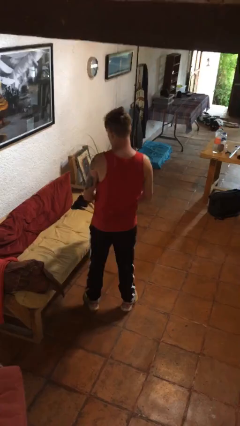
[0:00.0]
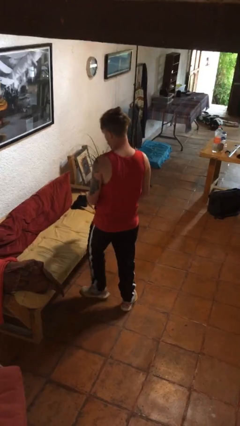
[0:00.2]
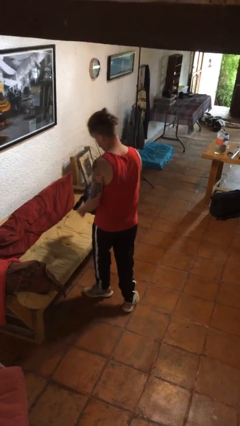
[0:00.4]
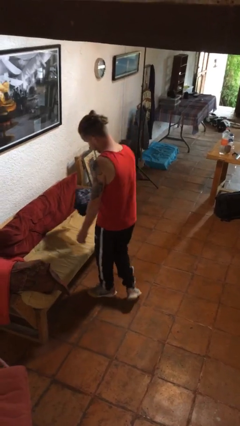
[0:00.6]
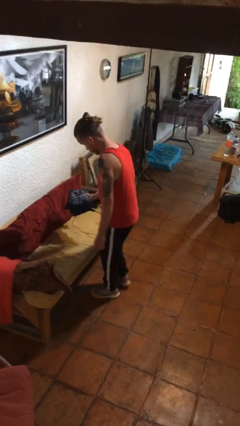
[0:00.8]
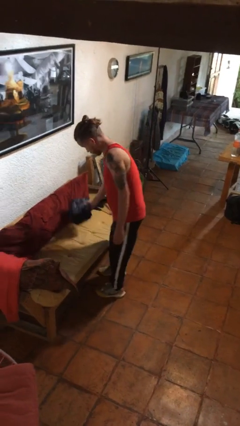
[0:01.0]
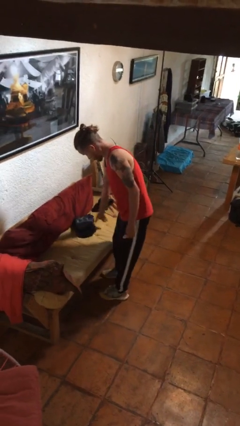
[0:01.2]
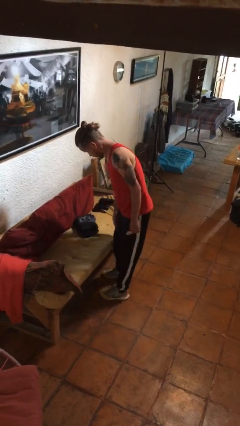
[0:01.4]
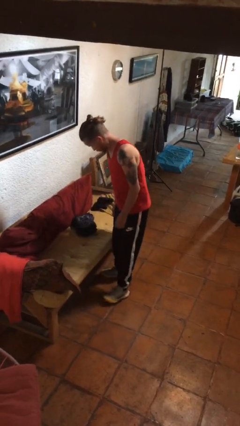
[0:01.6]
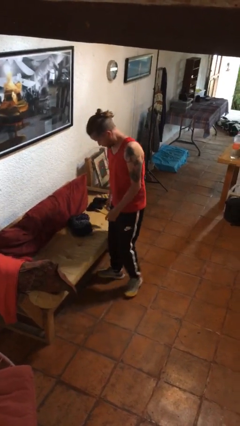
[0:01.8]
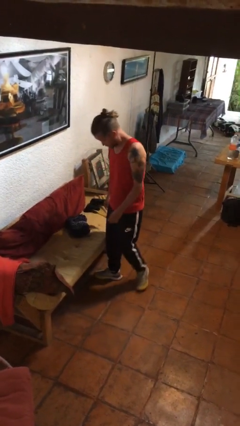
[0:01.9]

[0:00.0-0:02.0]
person puts down object on couch

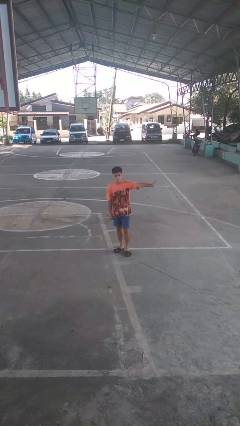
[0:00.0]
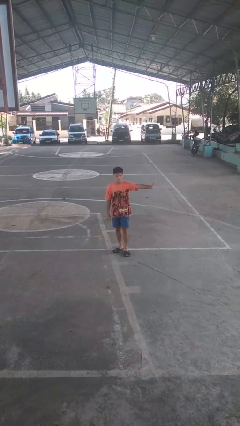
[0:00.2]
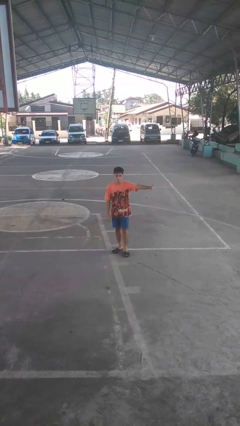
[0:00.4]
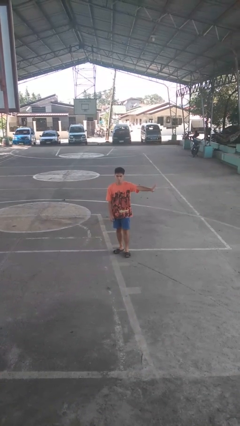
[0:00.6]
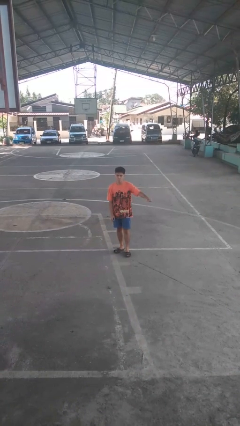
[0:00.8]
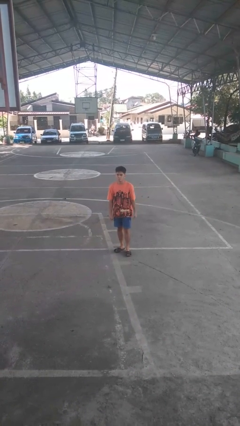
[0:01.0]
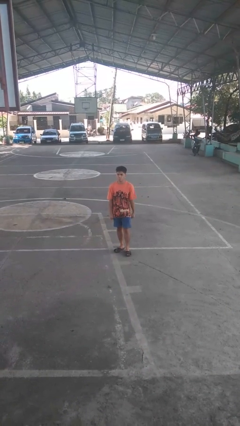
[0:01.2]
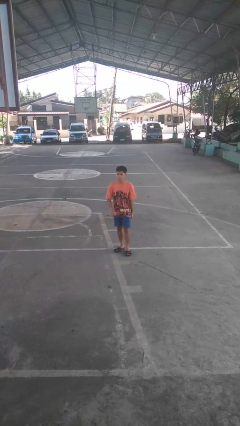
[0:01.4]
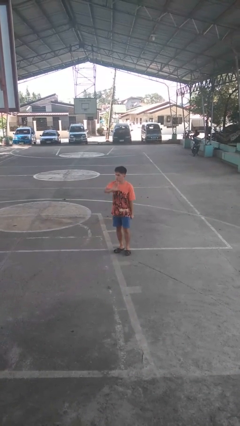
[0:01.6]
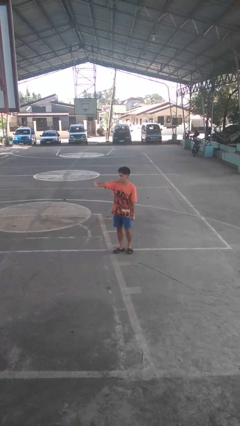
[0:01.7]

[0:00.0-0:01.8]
person gestures swipe left

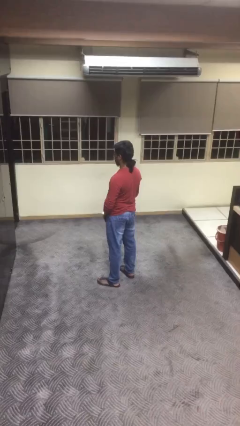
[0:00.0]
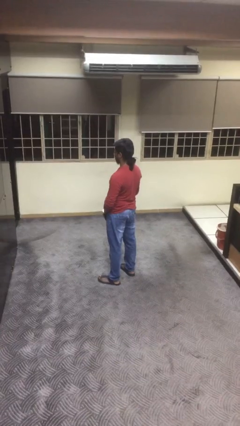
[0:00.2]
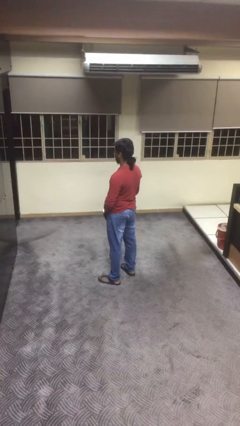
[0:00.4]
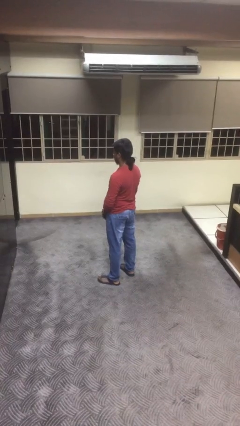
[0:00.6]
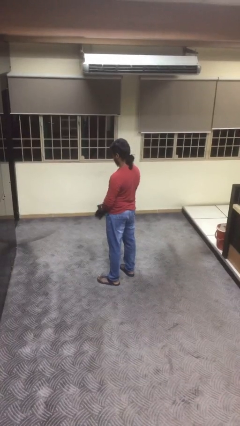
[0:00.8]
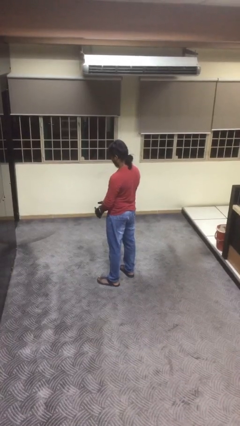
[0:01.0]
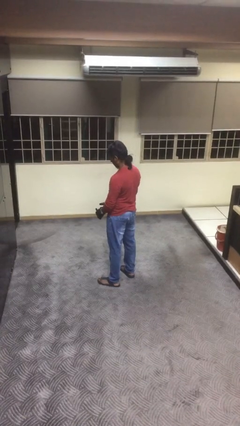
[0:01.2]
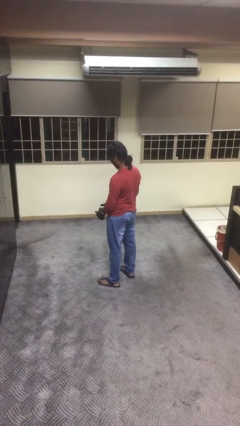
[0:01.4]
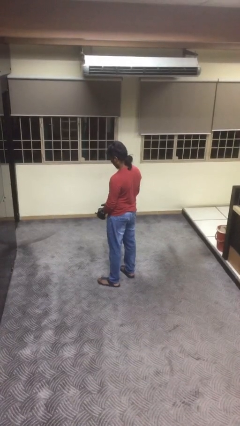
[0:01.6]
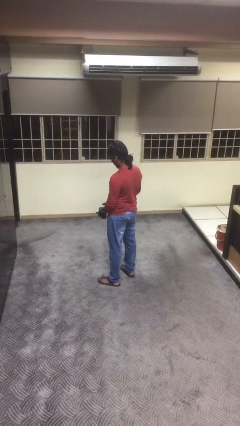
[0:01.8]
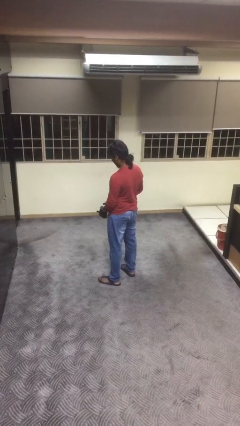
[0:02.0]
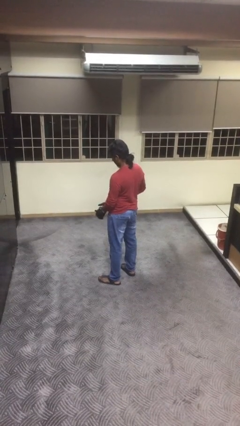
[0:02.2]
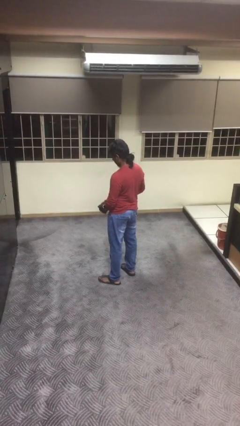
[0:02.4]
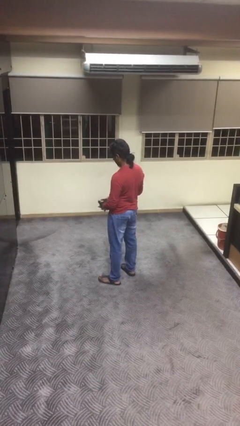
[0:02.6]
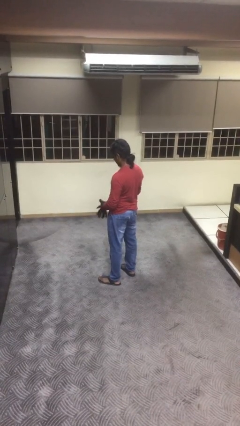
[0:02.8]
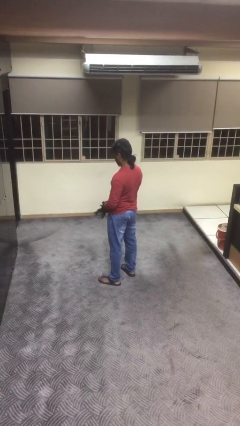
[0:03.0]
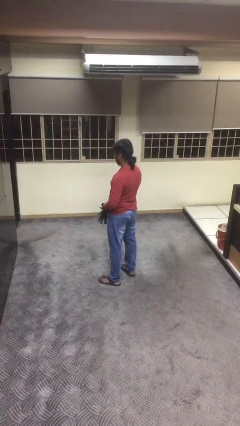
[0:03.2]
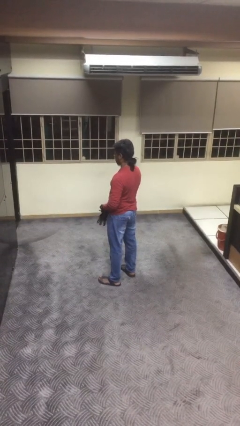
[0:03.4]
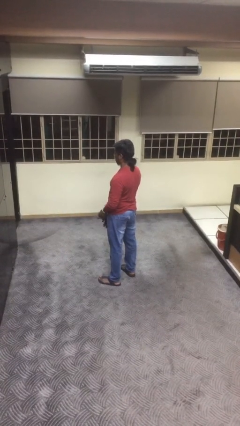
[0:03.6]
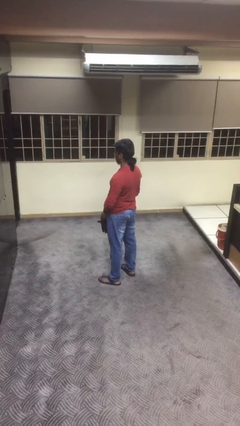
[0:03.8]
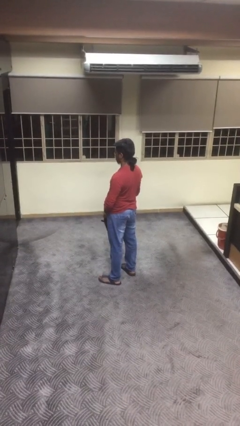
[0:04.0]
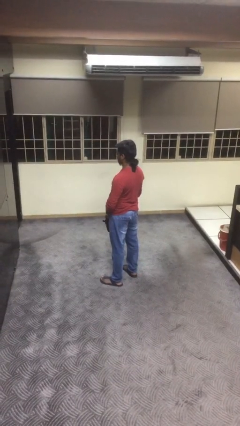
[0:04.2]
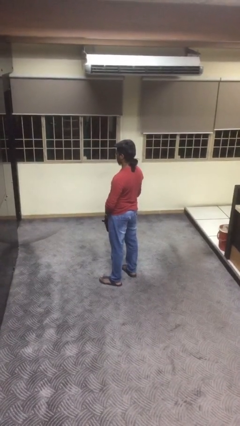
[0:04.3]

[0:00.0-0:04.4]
person takes off gloves

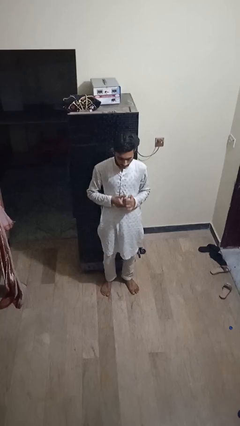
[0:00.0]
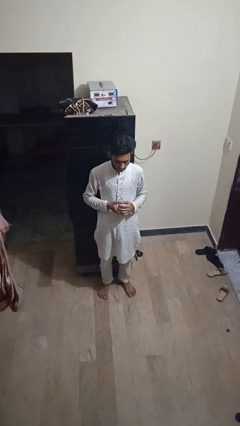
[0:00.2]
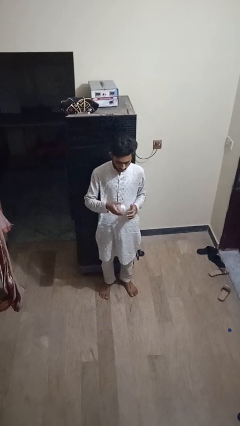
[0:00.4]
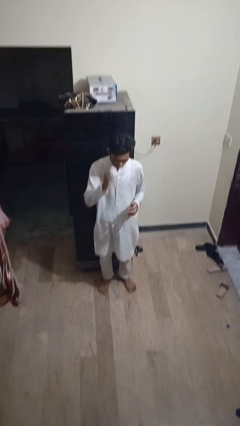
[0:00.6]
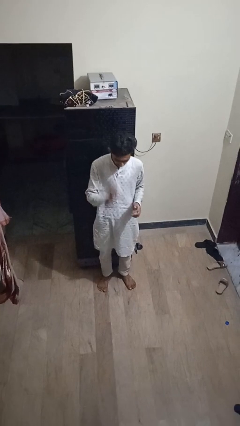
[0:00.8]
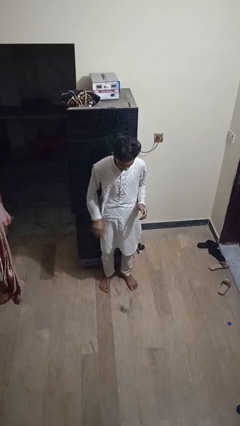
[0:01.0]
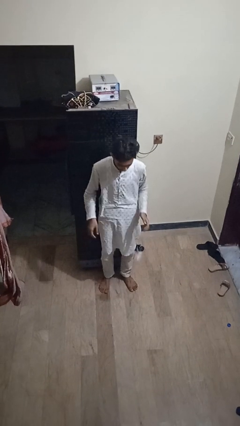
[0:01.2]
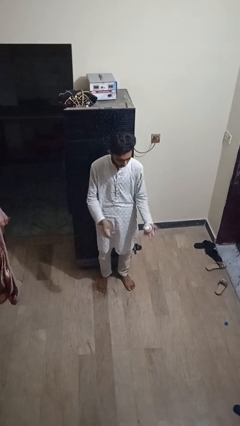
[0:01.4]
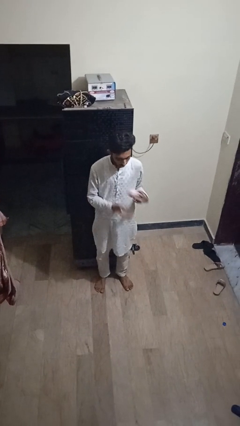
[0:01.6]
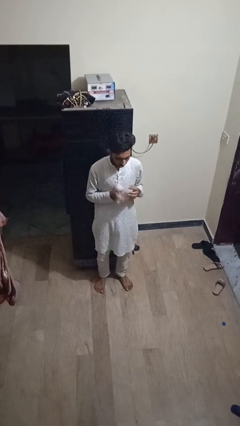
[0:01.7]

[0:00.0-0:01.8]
person bounces ball on floor

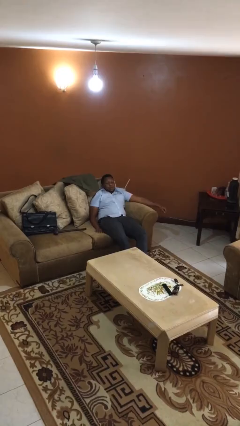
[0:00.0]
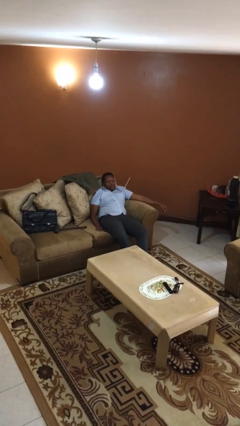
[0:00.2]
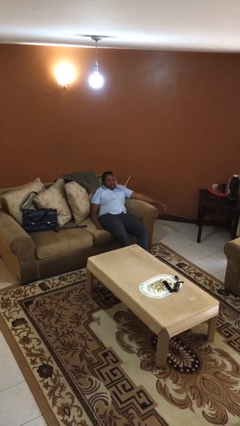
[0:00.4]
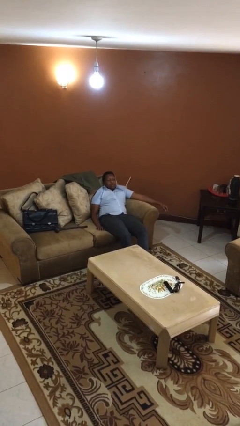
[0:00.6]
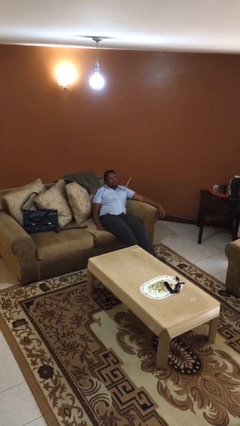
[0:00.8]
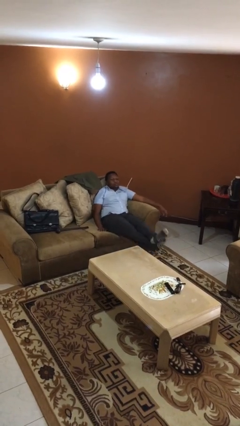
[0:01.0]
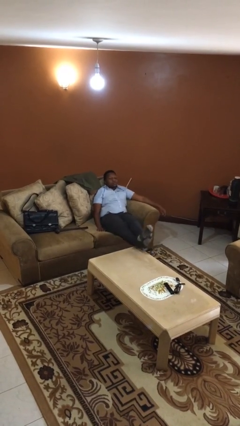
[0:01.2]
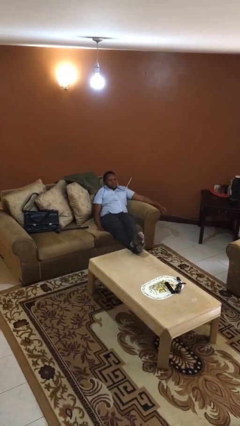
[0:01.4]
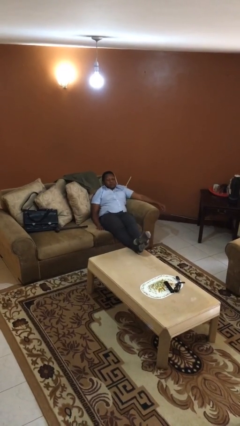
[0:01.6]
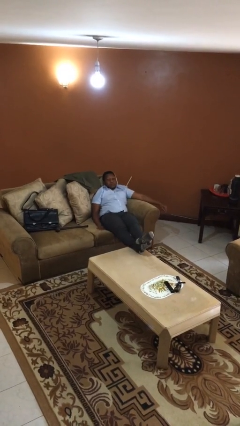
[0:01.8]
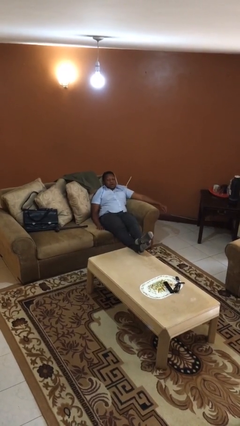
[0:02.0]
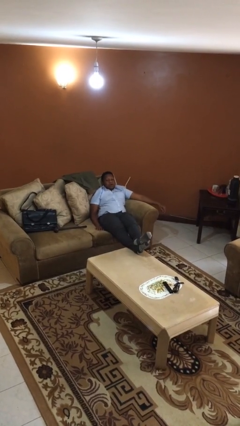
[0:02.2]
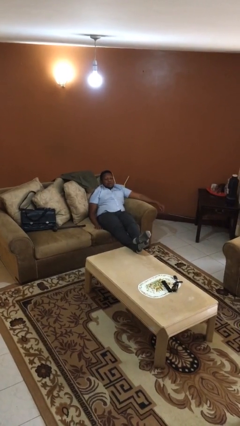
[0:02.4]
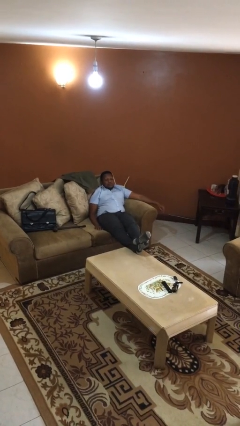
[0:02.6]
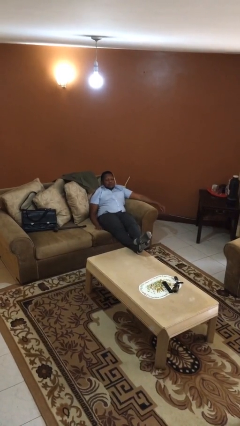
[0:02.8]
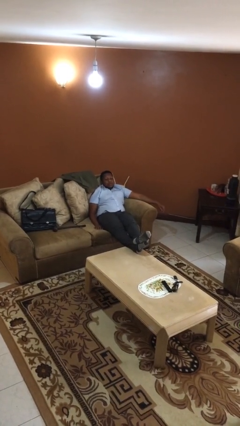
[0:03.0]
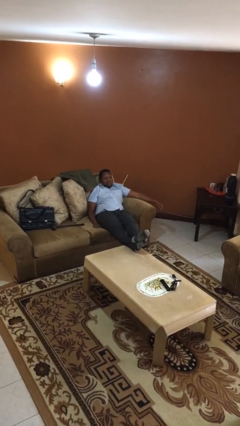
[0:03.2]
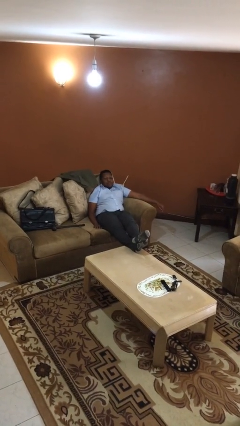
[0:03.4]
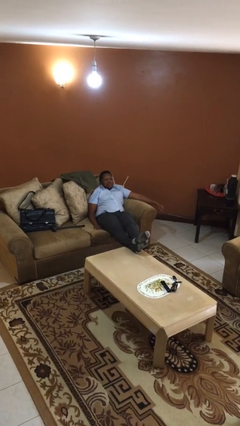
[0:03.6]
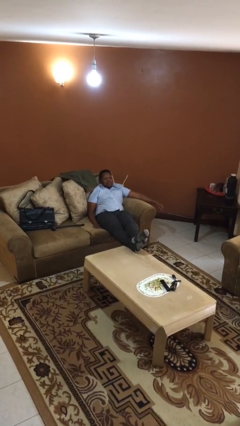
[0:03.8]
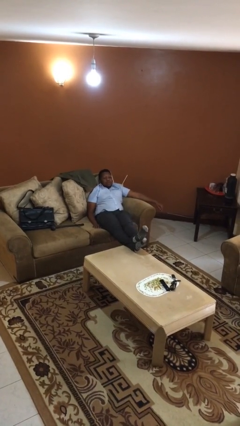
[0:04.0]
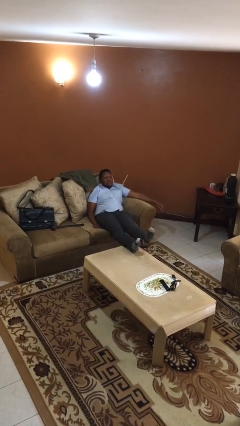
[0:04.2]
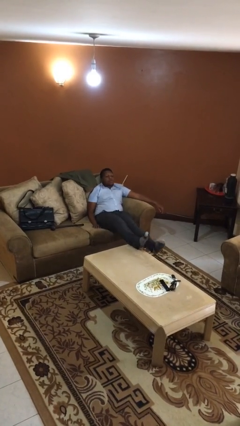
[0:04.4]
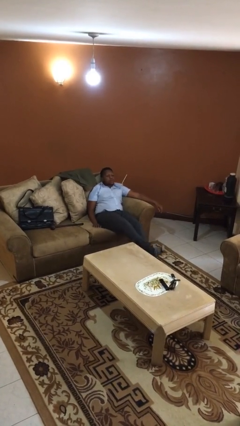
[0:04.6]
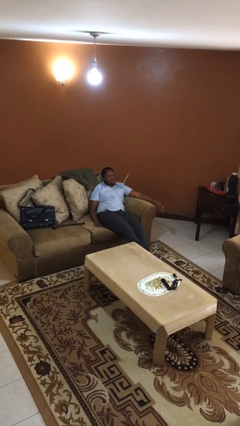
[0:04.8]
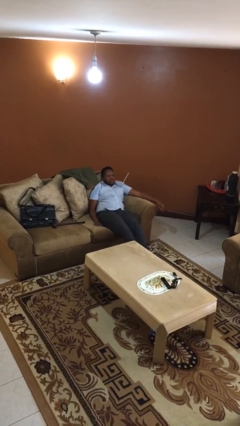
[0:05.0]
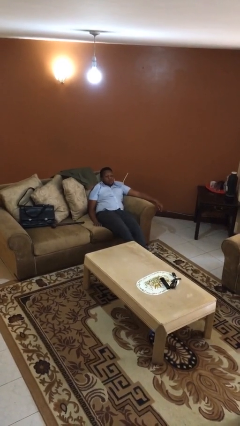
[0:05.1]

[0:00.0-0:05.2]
person puts feet up

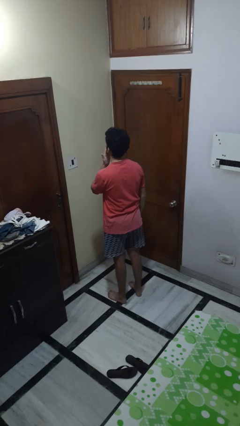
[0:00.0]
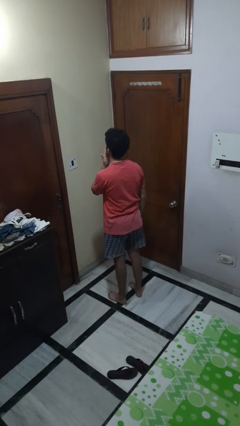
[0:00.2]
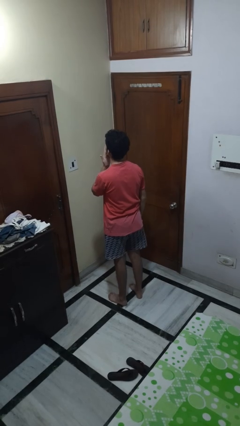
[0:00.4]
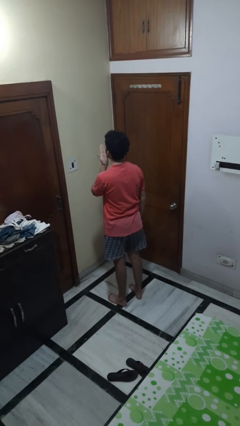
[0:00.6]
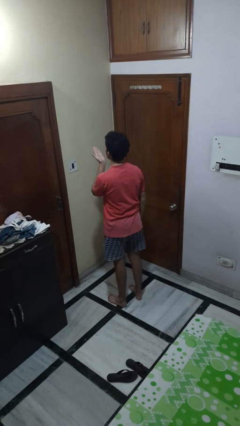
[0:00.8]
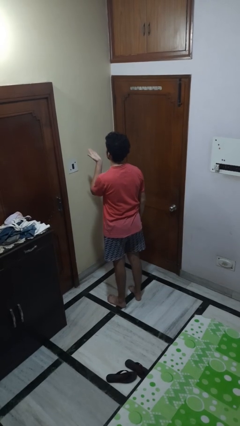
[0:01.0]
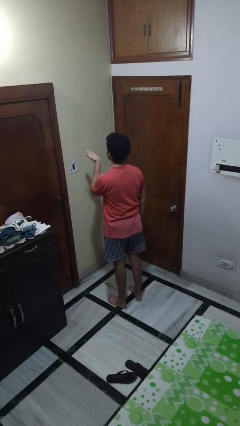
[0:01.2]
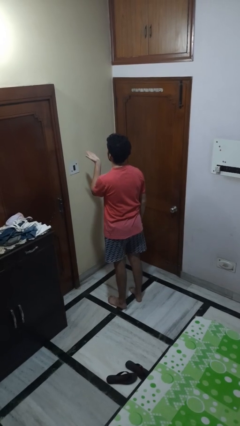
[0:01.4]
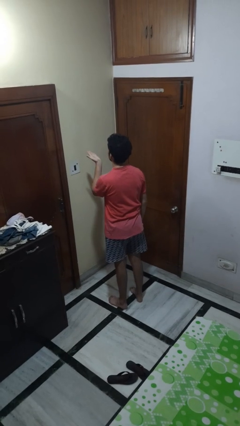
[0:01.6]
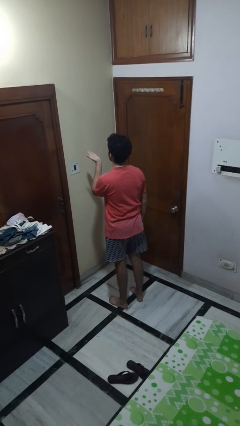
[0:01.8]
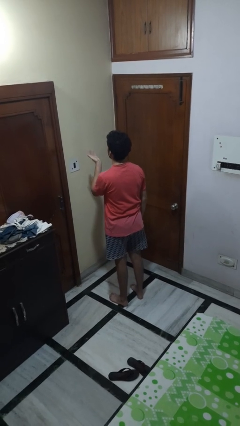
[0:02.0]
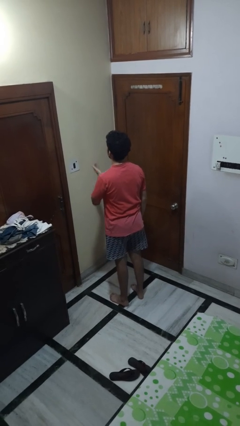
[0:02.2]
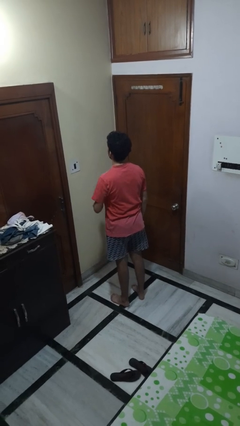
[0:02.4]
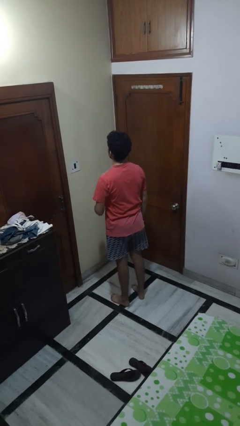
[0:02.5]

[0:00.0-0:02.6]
person gestures blow kiss
